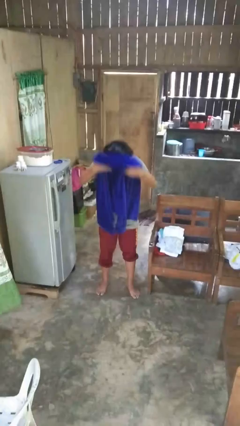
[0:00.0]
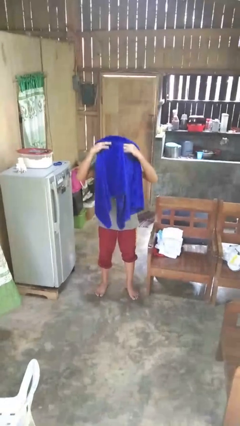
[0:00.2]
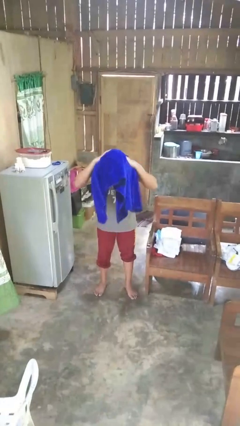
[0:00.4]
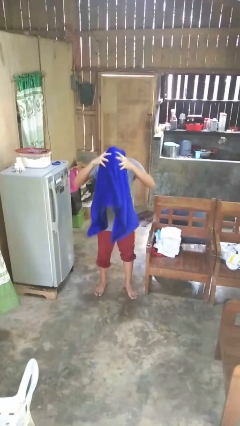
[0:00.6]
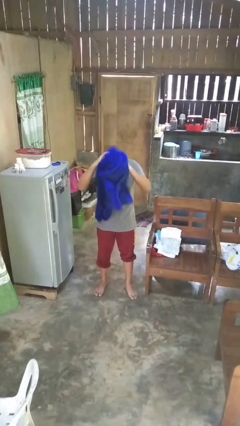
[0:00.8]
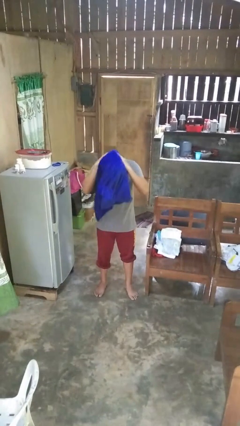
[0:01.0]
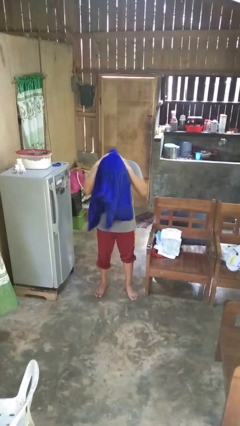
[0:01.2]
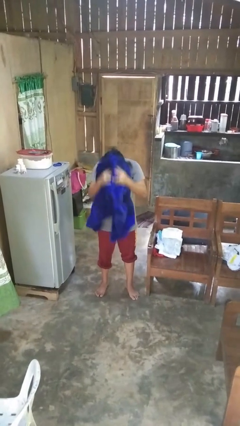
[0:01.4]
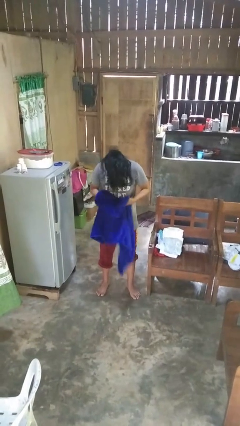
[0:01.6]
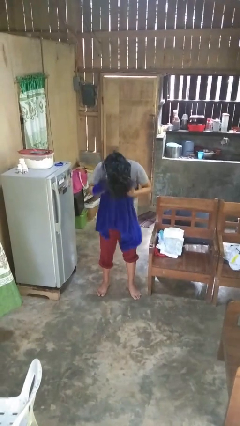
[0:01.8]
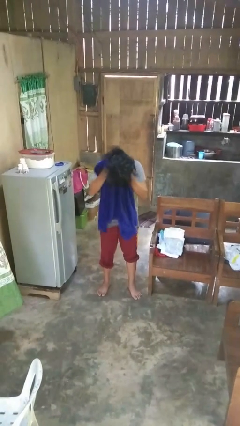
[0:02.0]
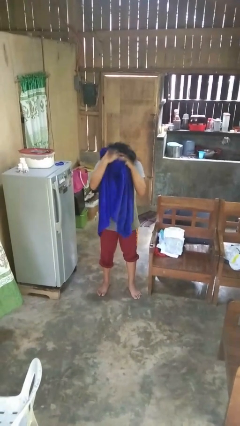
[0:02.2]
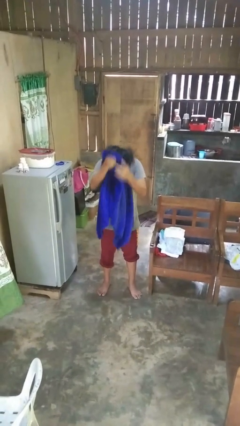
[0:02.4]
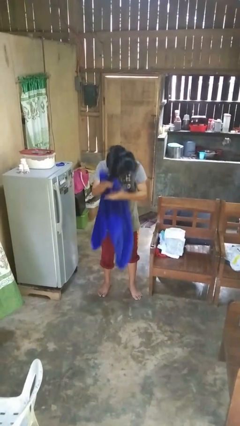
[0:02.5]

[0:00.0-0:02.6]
person dries hair with towel

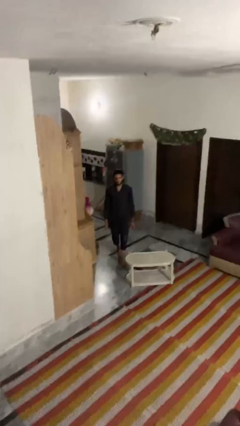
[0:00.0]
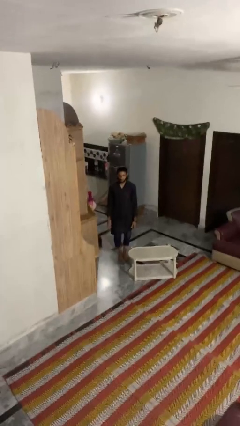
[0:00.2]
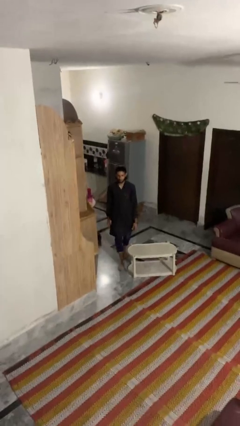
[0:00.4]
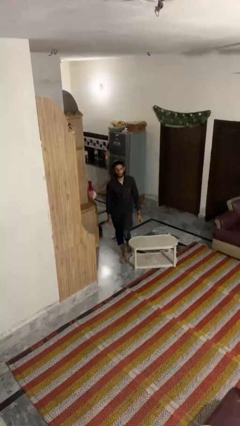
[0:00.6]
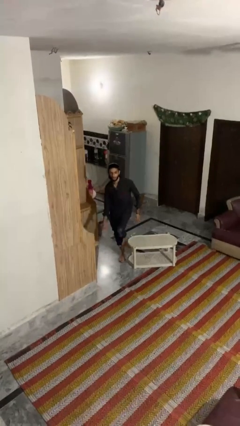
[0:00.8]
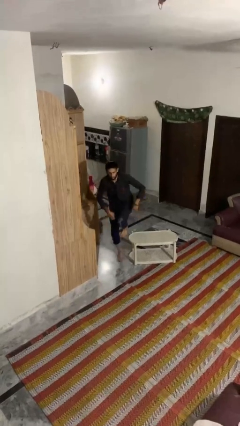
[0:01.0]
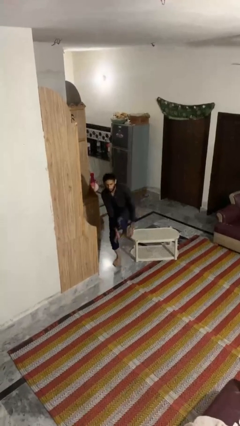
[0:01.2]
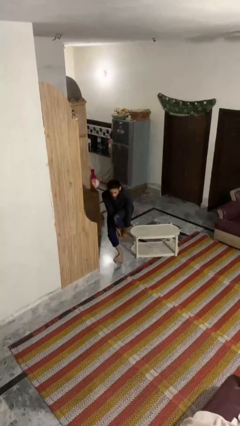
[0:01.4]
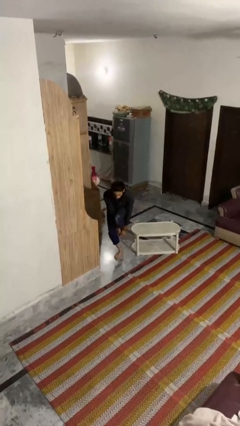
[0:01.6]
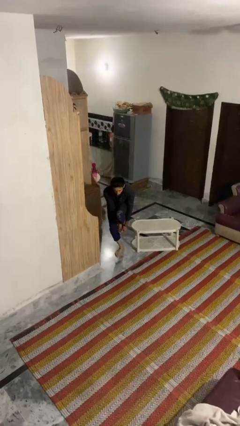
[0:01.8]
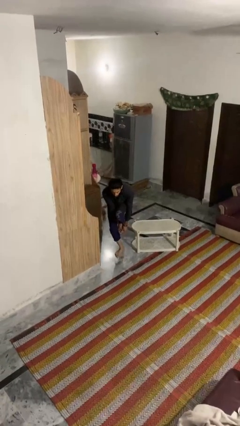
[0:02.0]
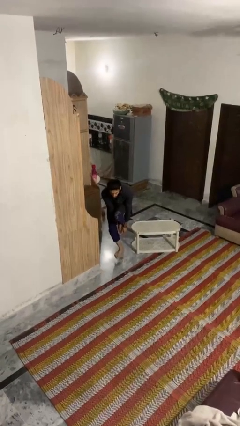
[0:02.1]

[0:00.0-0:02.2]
person bumps into table

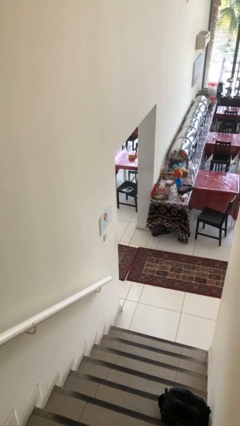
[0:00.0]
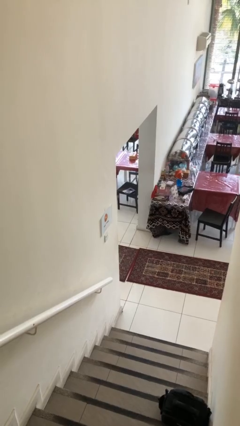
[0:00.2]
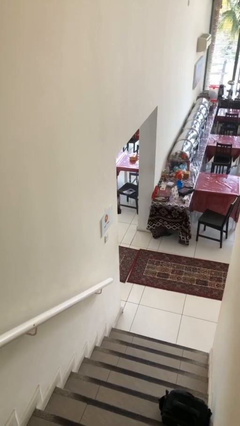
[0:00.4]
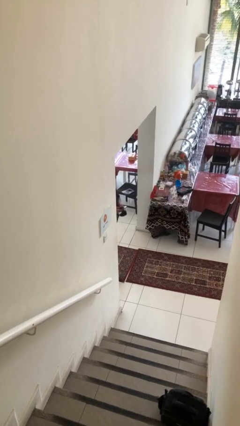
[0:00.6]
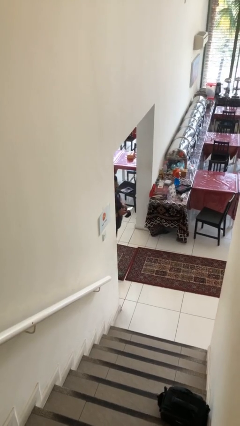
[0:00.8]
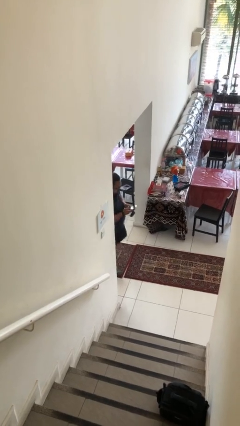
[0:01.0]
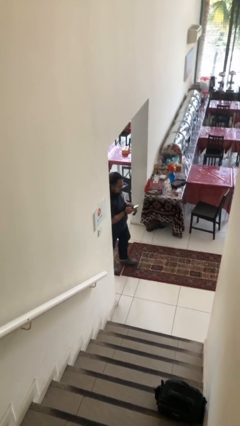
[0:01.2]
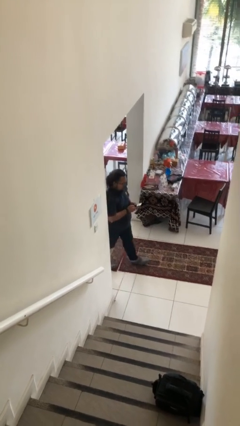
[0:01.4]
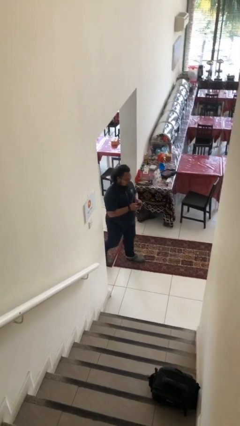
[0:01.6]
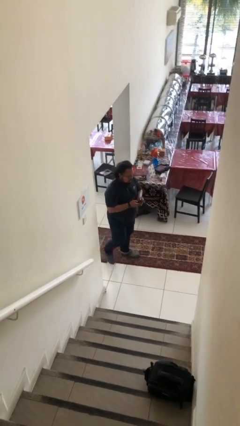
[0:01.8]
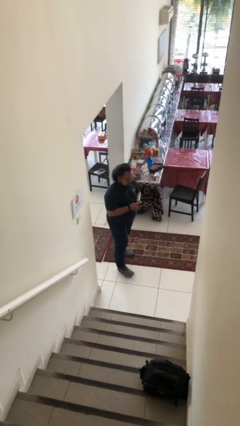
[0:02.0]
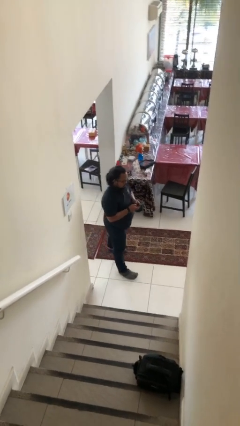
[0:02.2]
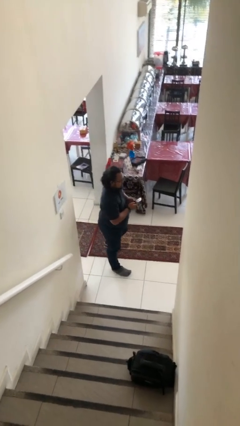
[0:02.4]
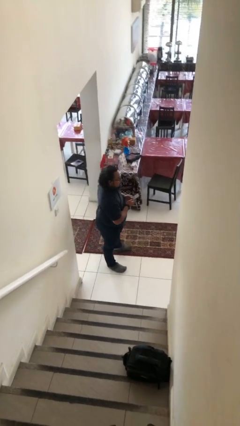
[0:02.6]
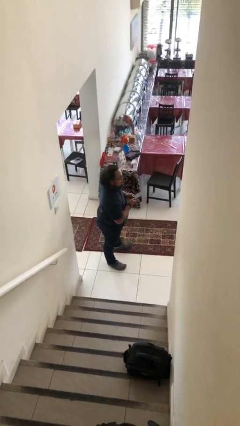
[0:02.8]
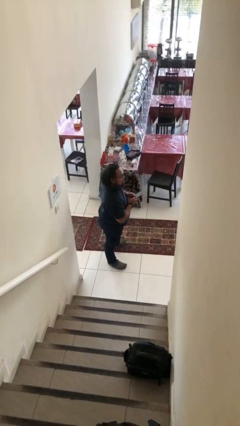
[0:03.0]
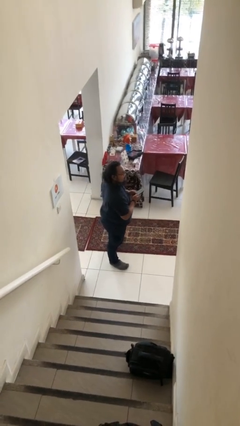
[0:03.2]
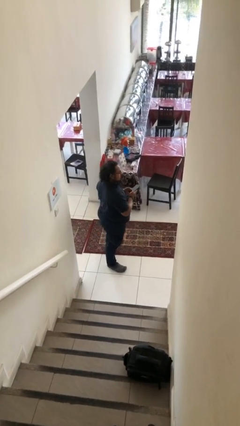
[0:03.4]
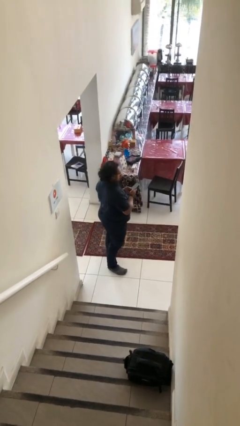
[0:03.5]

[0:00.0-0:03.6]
person enters scene through structure

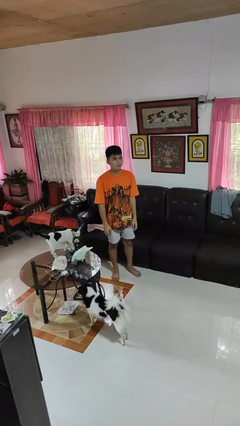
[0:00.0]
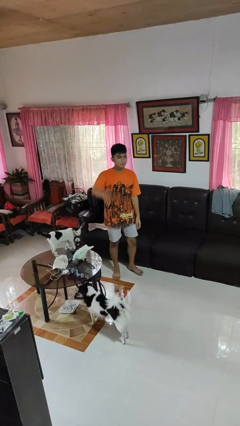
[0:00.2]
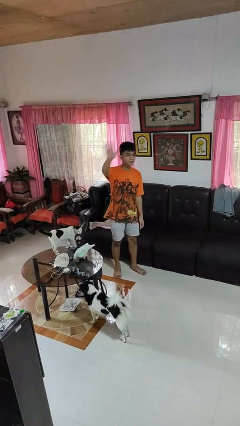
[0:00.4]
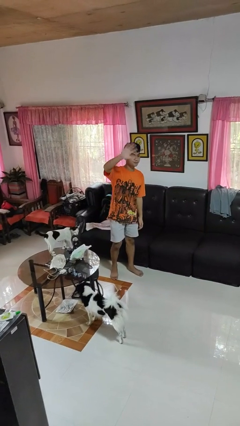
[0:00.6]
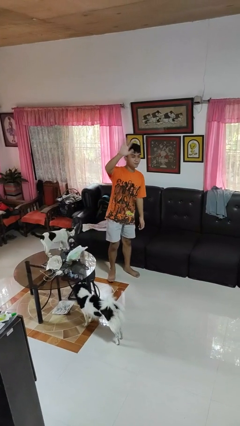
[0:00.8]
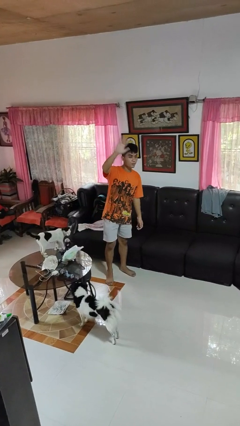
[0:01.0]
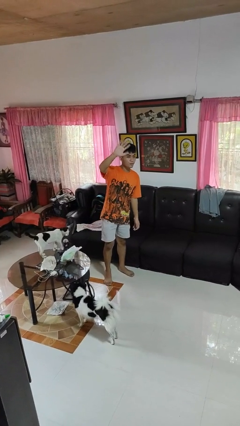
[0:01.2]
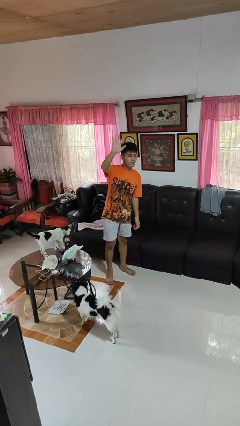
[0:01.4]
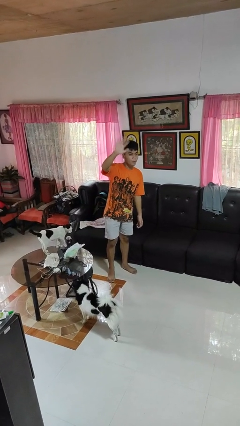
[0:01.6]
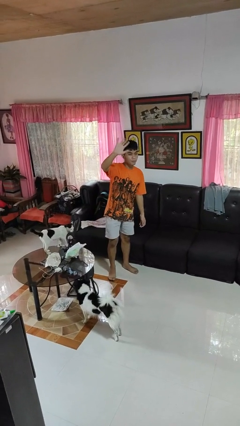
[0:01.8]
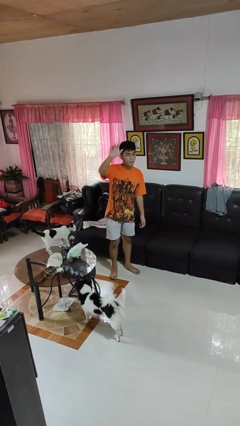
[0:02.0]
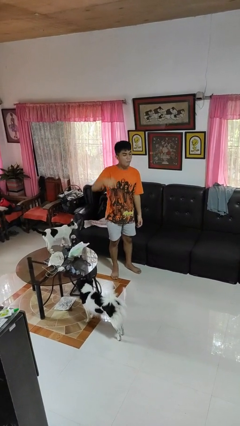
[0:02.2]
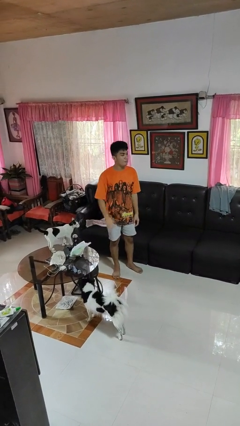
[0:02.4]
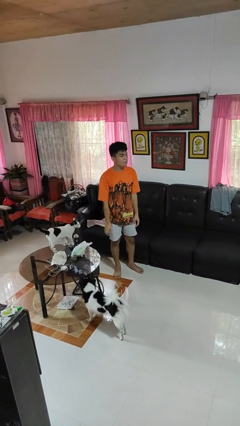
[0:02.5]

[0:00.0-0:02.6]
person waves at person

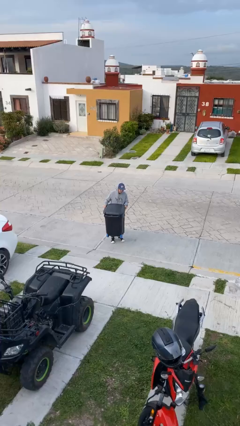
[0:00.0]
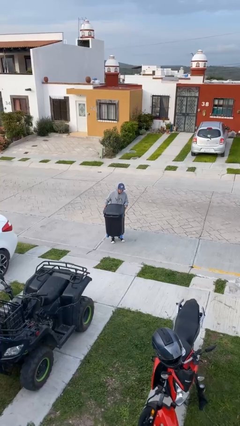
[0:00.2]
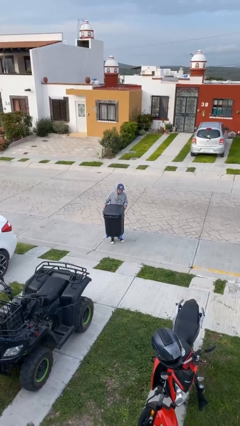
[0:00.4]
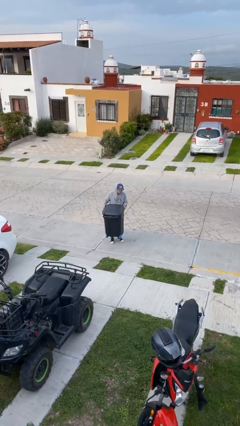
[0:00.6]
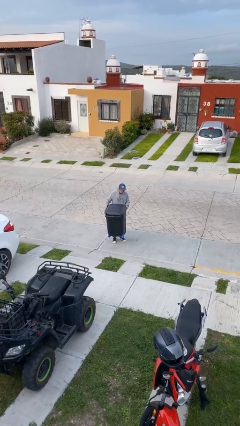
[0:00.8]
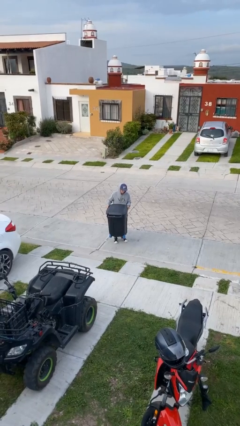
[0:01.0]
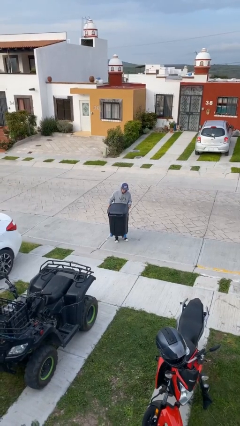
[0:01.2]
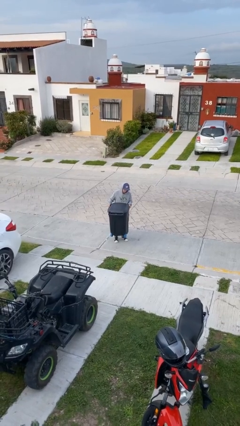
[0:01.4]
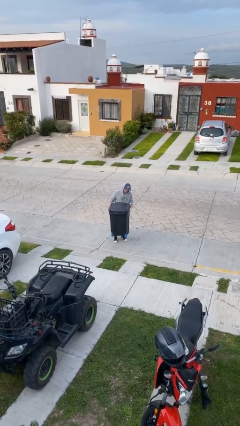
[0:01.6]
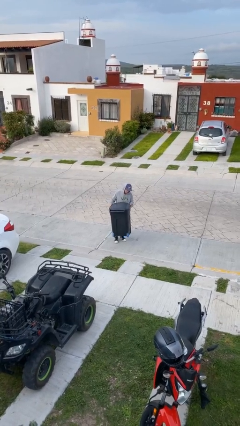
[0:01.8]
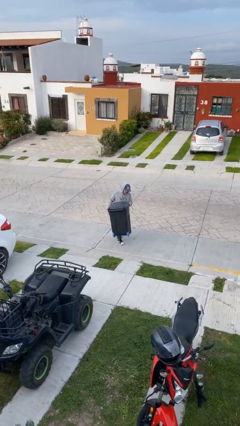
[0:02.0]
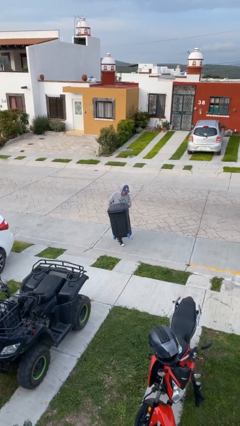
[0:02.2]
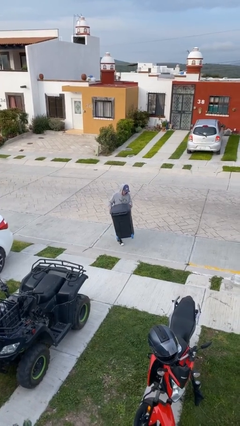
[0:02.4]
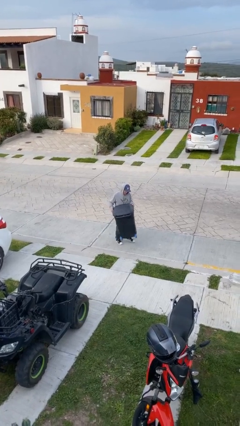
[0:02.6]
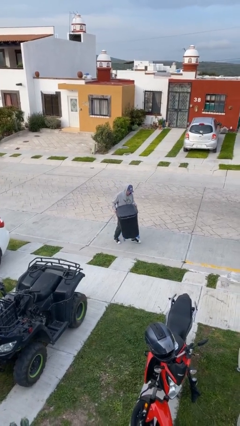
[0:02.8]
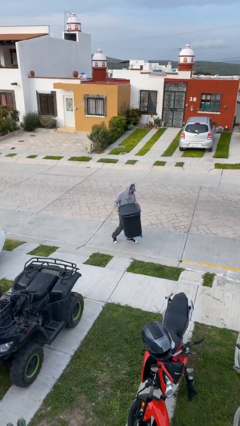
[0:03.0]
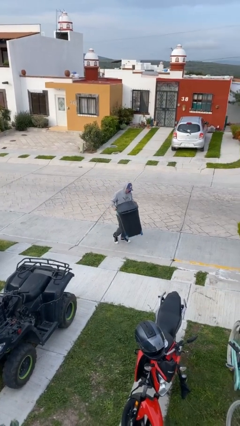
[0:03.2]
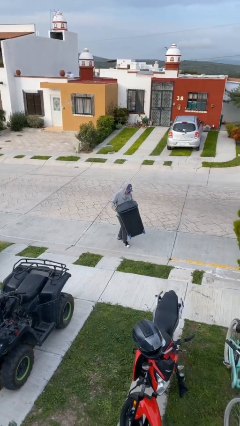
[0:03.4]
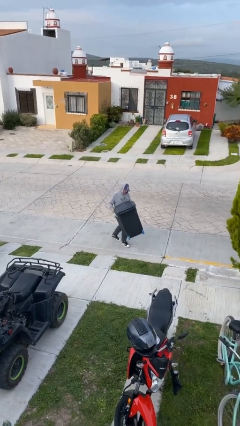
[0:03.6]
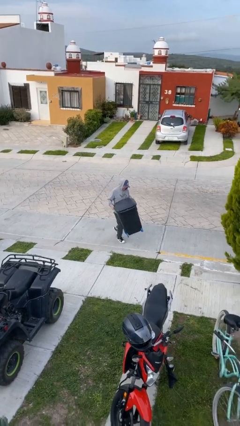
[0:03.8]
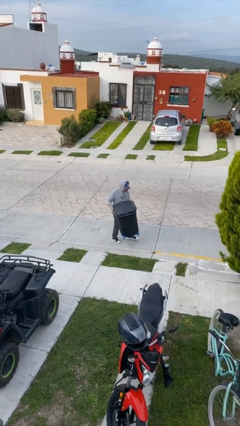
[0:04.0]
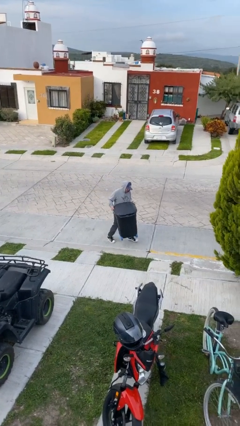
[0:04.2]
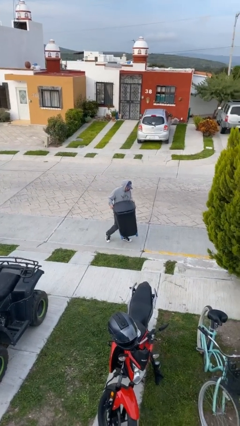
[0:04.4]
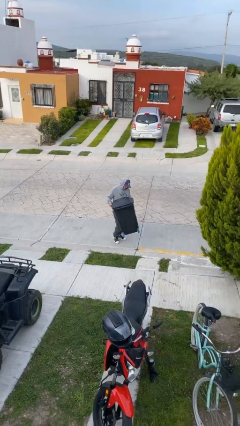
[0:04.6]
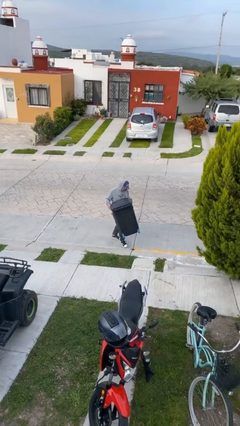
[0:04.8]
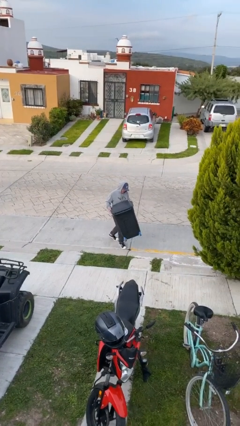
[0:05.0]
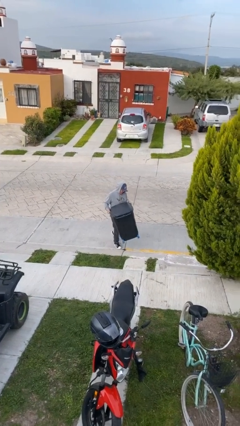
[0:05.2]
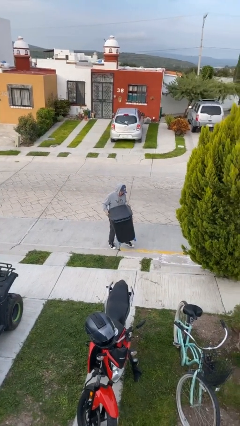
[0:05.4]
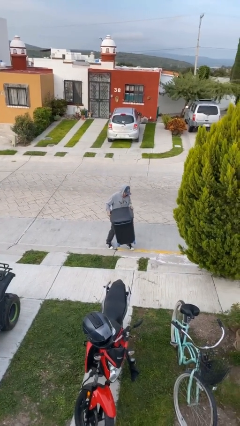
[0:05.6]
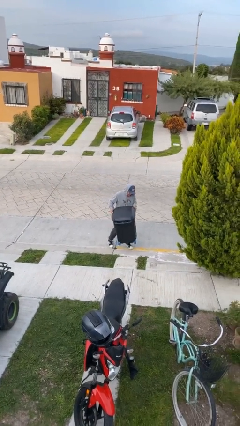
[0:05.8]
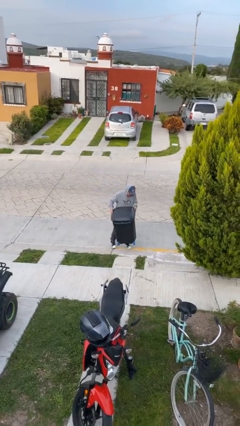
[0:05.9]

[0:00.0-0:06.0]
person carries heavy object

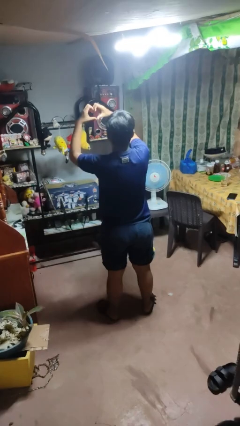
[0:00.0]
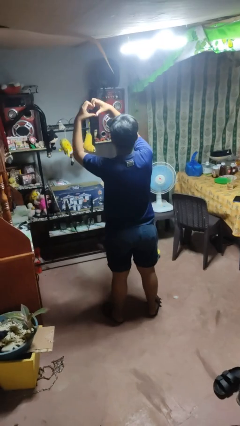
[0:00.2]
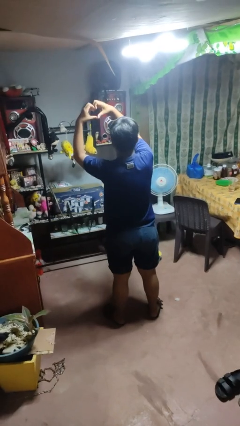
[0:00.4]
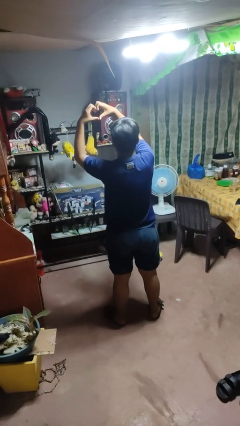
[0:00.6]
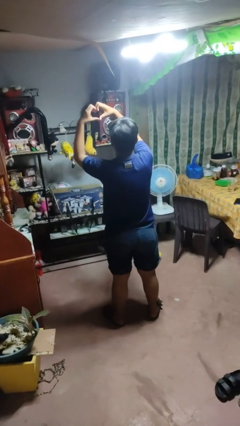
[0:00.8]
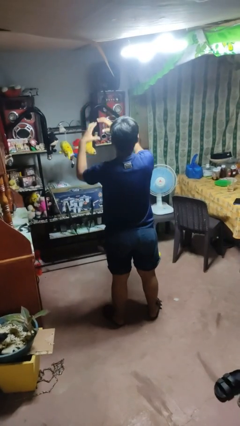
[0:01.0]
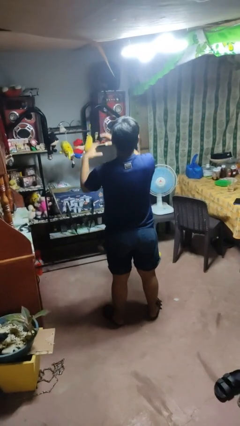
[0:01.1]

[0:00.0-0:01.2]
person gestures heart
